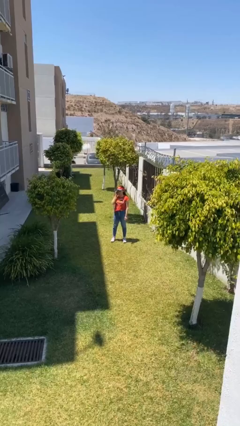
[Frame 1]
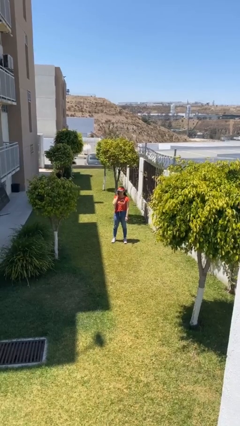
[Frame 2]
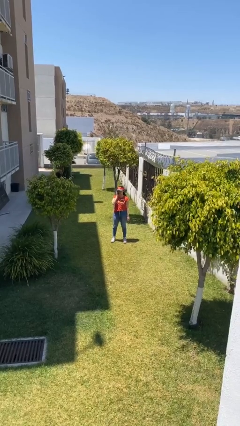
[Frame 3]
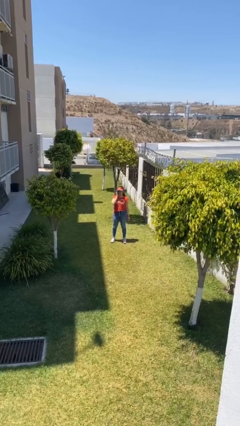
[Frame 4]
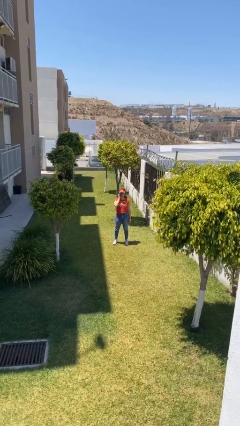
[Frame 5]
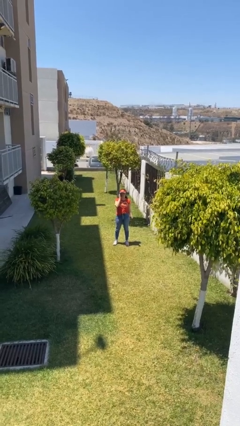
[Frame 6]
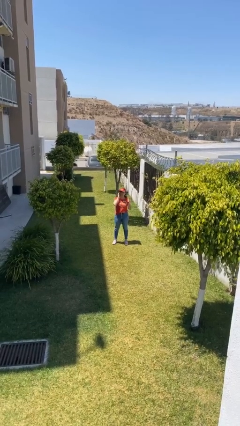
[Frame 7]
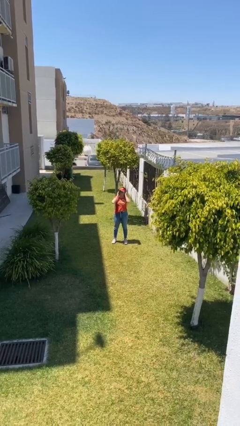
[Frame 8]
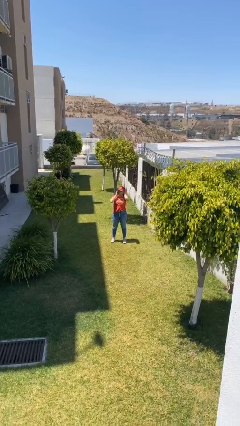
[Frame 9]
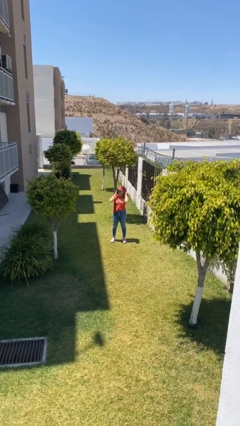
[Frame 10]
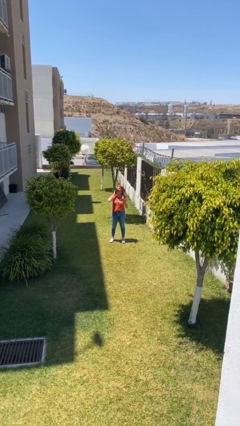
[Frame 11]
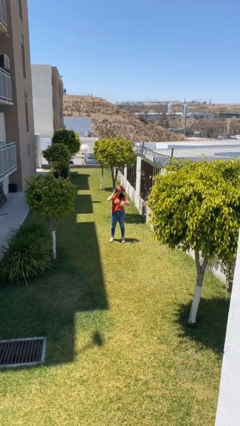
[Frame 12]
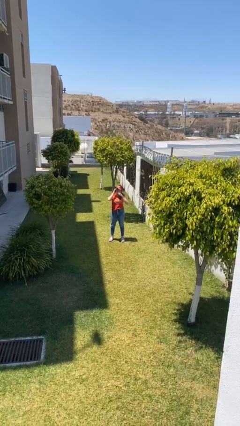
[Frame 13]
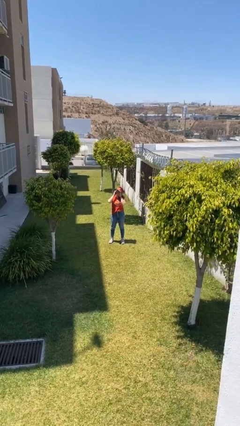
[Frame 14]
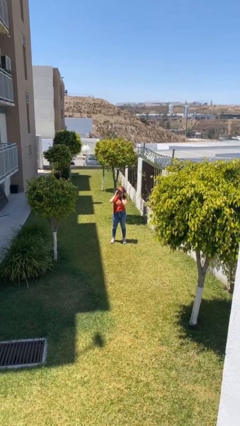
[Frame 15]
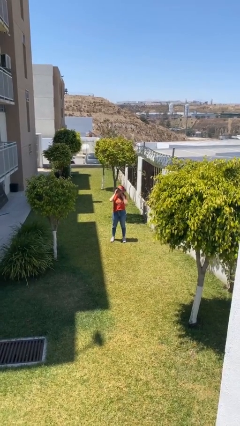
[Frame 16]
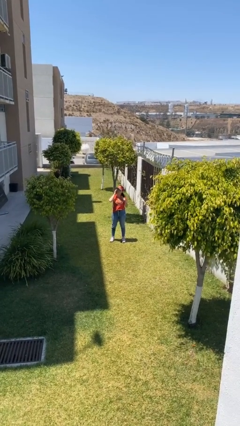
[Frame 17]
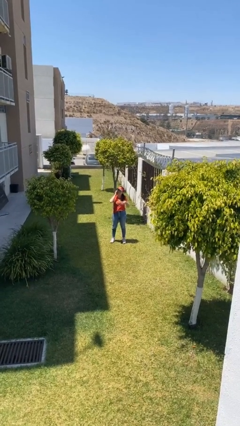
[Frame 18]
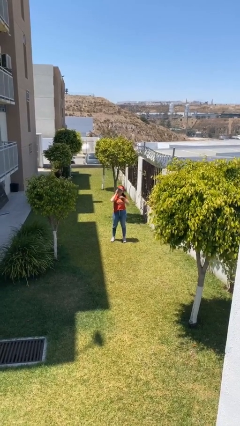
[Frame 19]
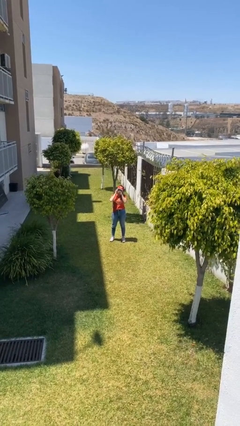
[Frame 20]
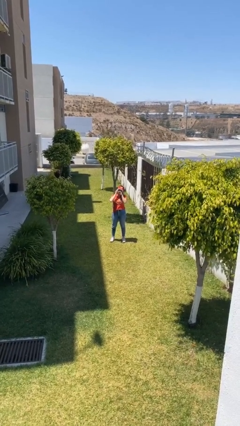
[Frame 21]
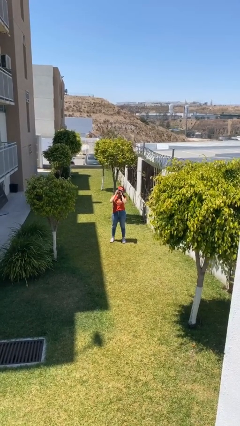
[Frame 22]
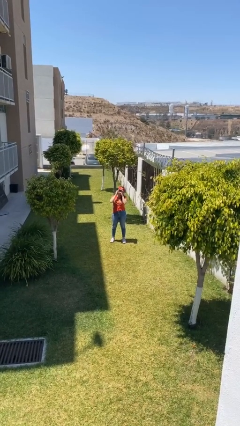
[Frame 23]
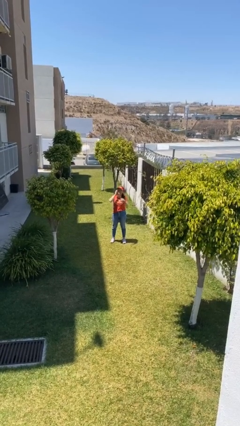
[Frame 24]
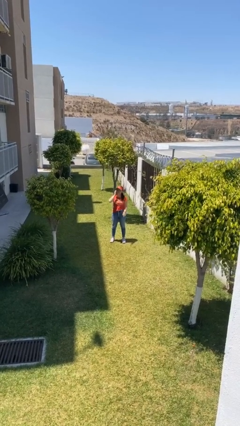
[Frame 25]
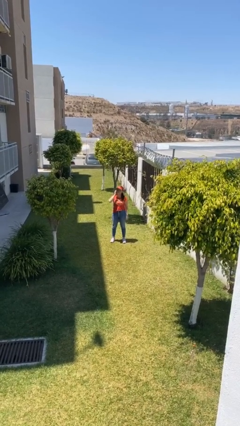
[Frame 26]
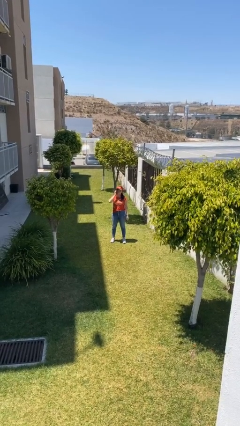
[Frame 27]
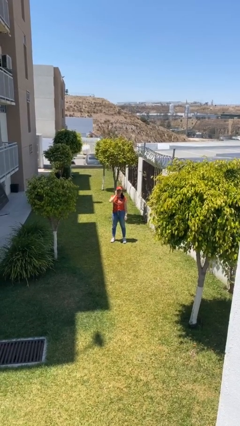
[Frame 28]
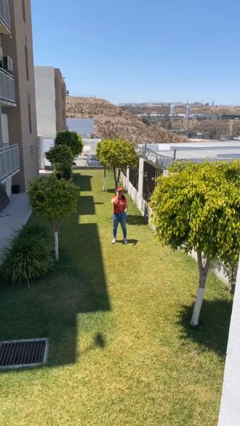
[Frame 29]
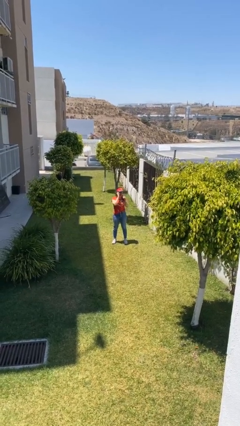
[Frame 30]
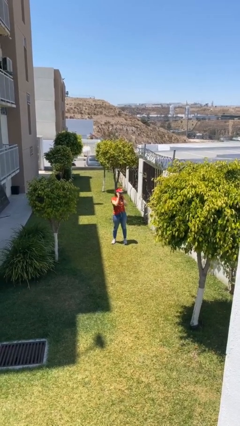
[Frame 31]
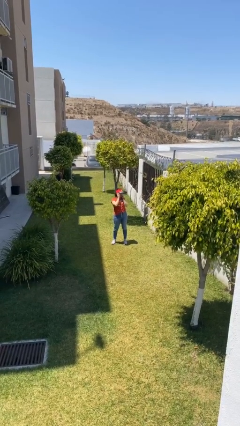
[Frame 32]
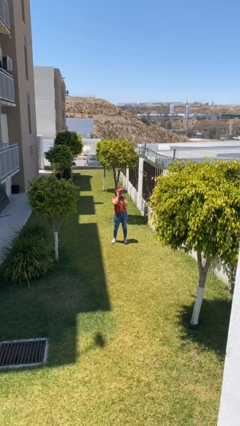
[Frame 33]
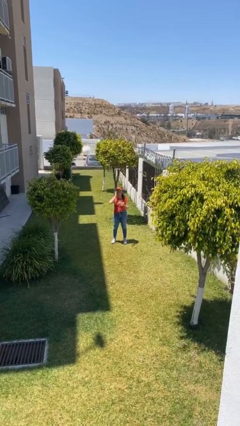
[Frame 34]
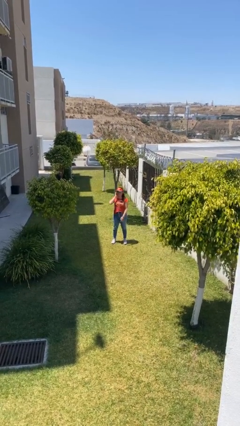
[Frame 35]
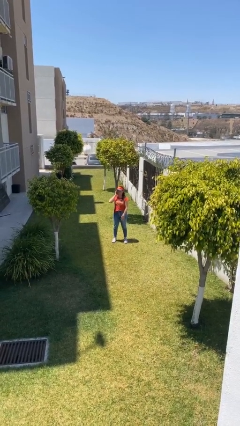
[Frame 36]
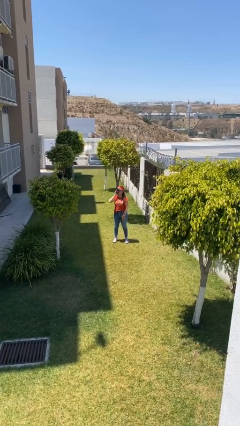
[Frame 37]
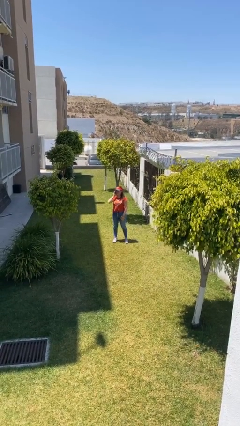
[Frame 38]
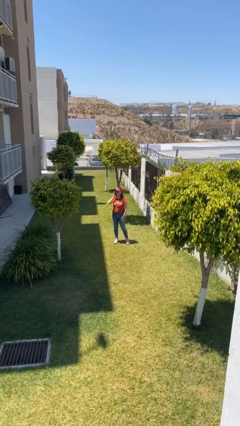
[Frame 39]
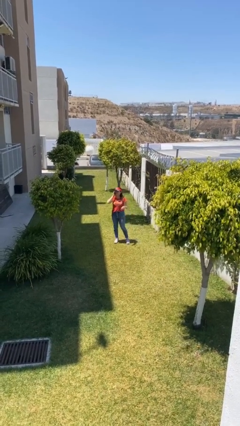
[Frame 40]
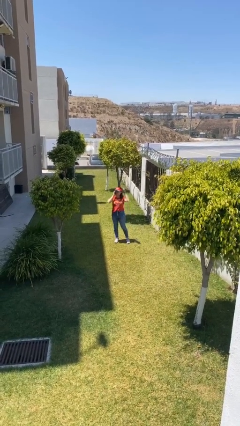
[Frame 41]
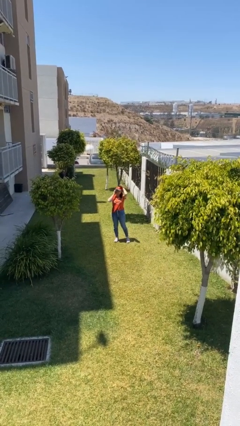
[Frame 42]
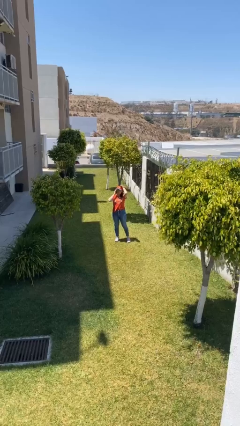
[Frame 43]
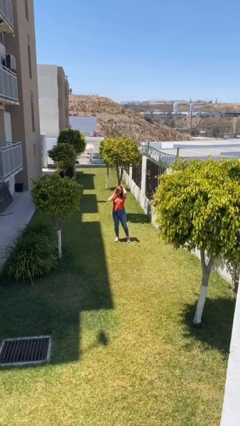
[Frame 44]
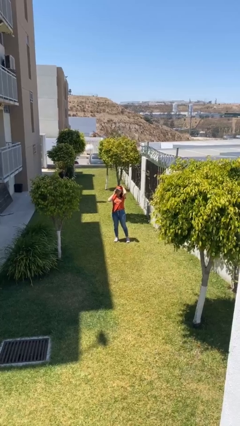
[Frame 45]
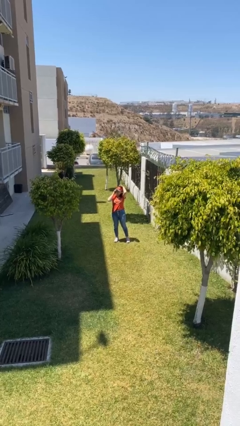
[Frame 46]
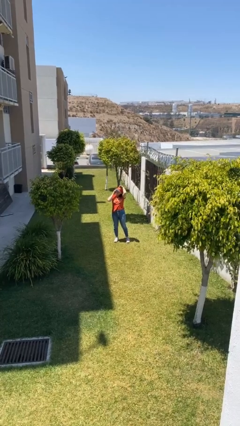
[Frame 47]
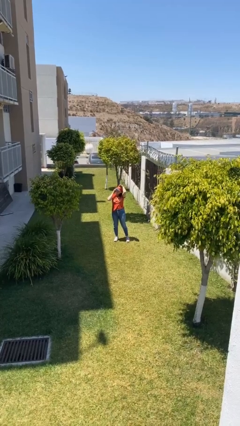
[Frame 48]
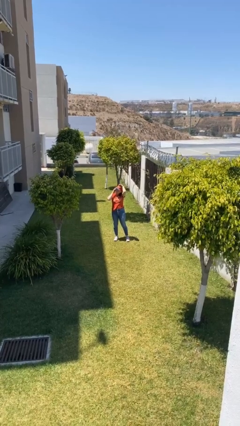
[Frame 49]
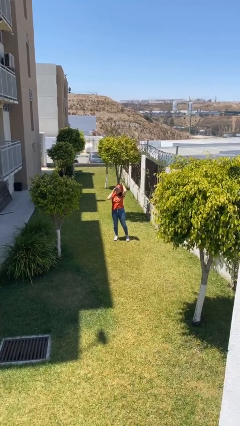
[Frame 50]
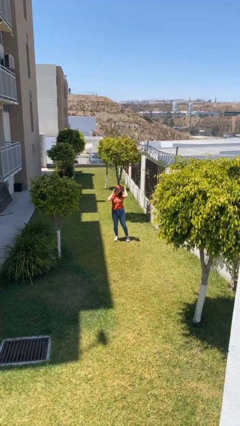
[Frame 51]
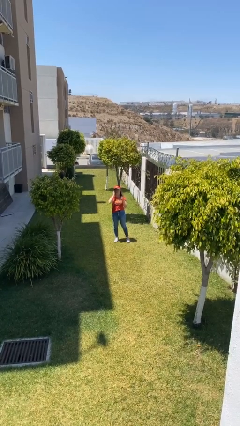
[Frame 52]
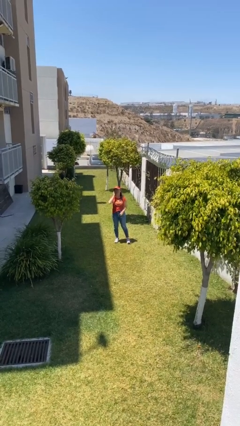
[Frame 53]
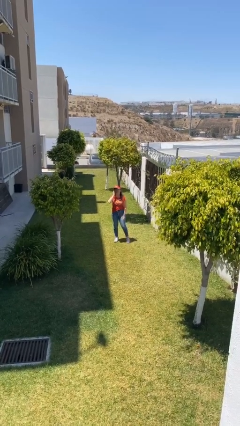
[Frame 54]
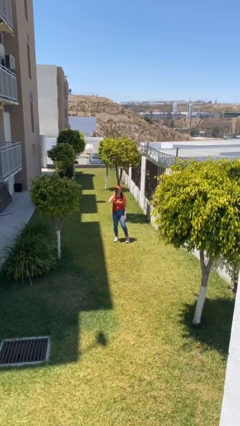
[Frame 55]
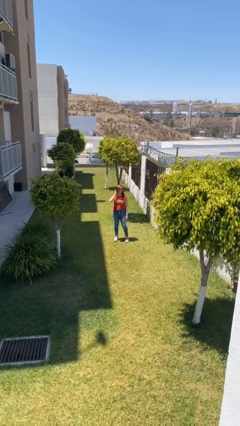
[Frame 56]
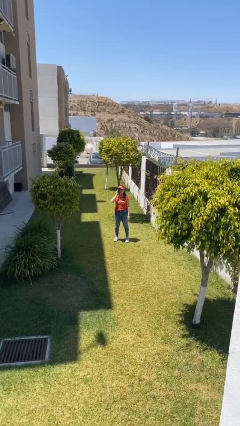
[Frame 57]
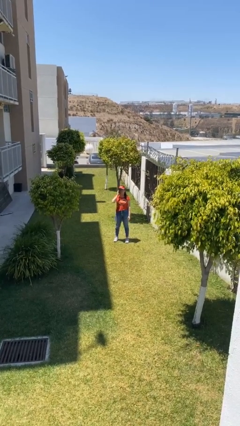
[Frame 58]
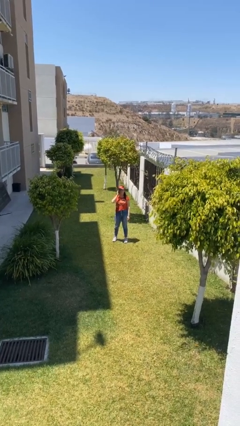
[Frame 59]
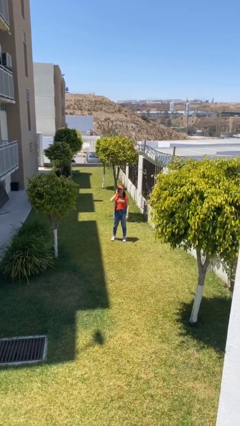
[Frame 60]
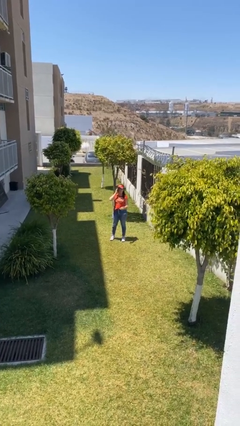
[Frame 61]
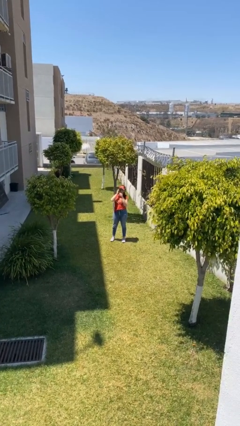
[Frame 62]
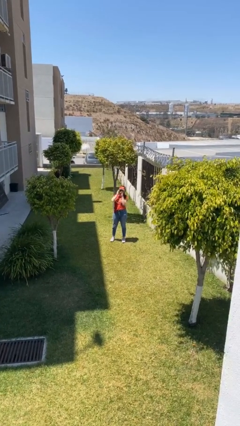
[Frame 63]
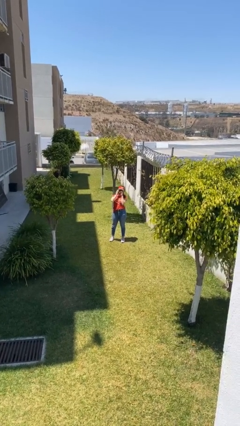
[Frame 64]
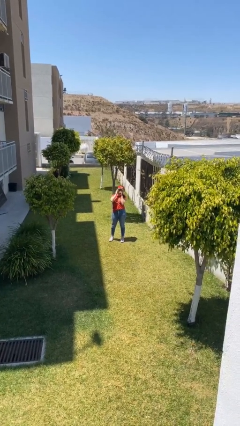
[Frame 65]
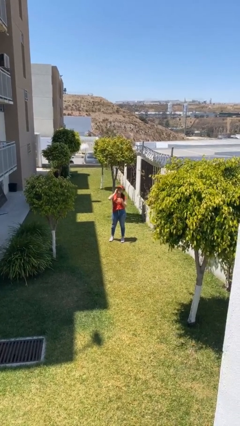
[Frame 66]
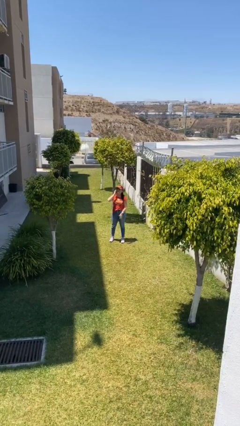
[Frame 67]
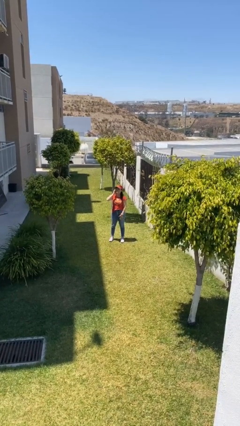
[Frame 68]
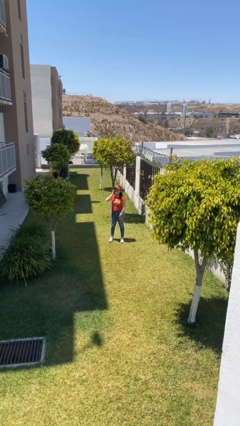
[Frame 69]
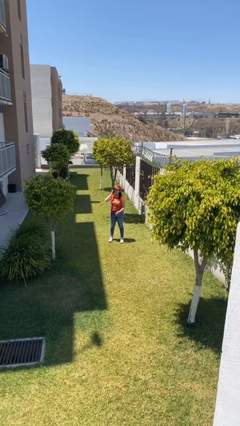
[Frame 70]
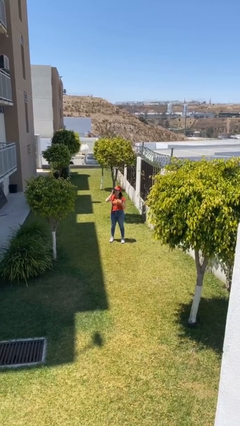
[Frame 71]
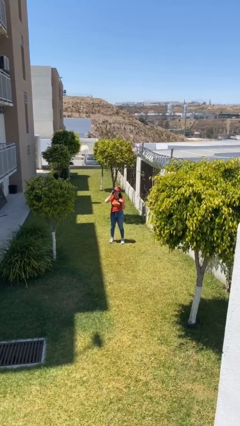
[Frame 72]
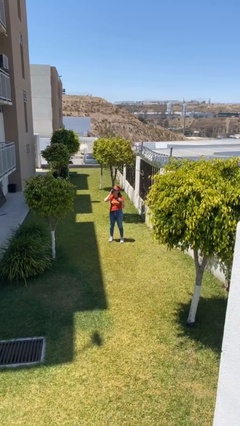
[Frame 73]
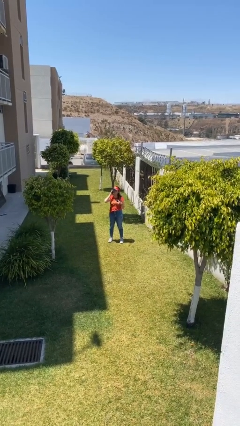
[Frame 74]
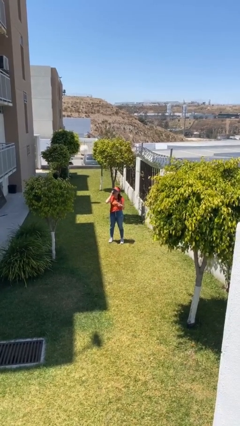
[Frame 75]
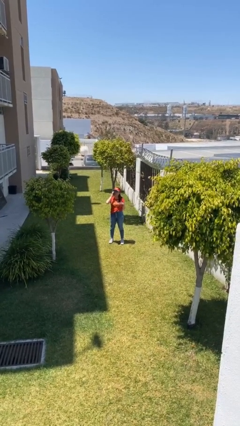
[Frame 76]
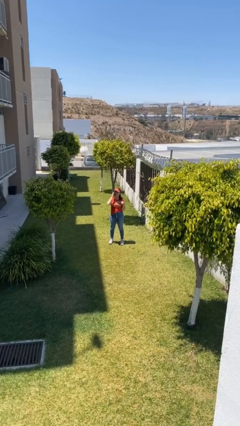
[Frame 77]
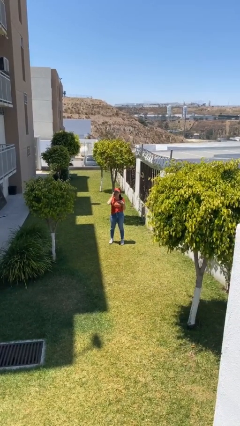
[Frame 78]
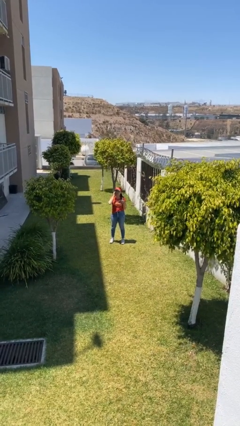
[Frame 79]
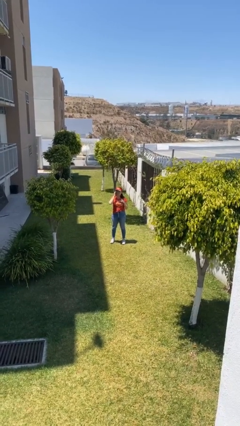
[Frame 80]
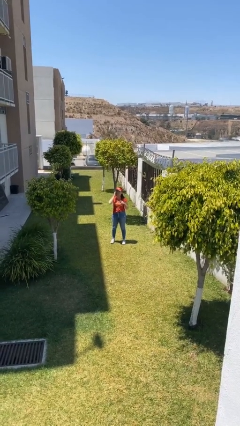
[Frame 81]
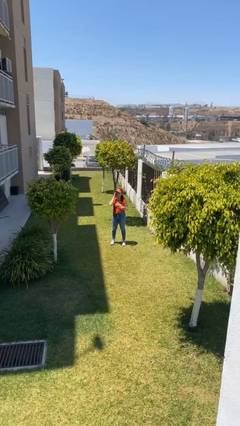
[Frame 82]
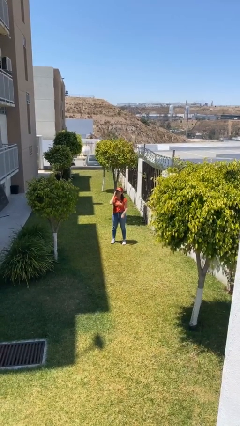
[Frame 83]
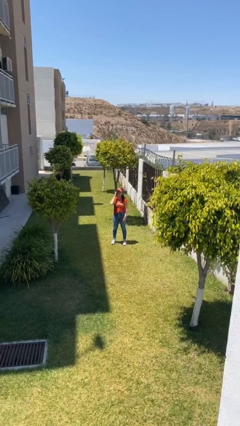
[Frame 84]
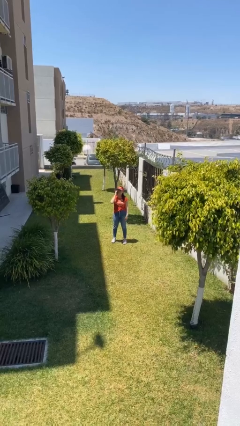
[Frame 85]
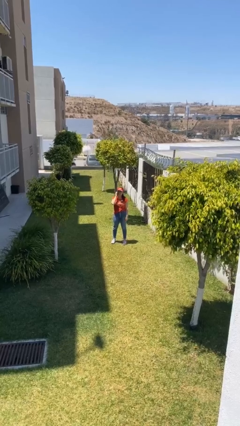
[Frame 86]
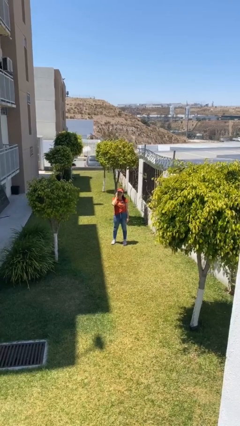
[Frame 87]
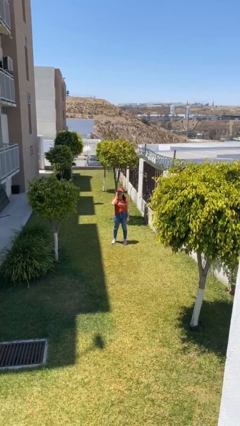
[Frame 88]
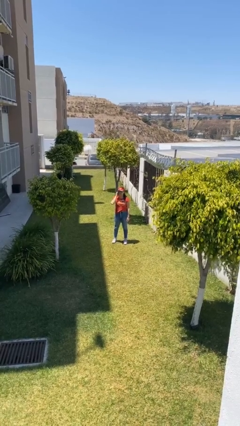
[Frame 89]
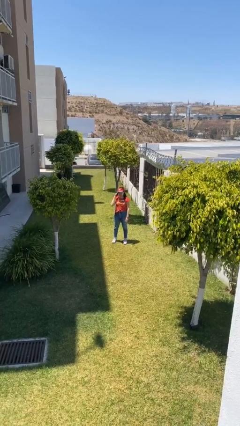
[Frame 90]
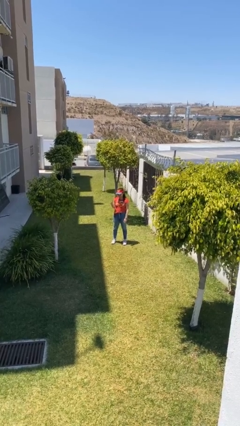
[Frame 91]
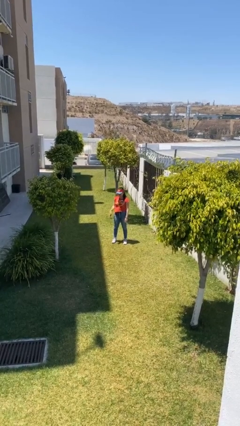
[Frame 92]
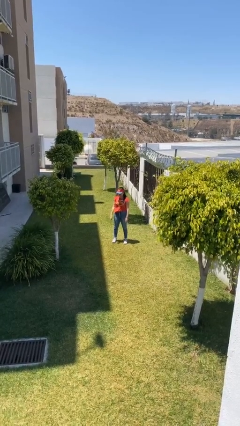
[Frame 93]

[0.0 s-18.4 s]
person talks on phone
